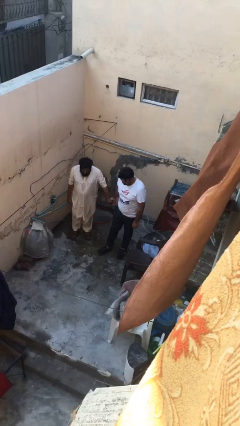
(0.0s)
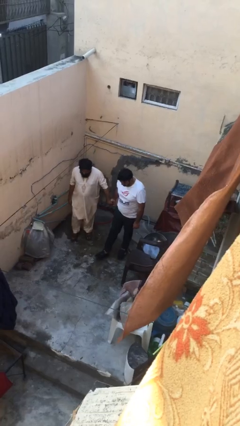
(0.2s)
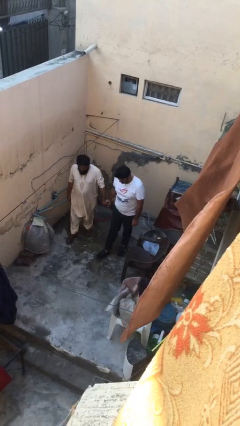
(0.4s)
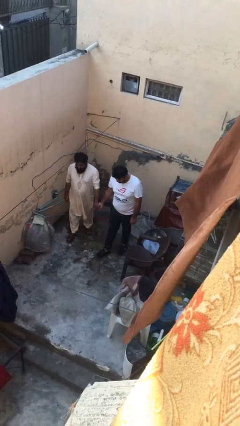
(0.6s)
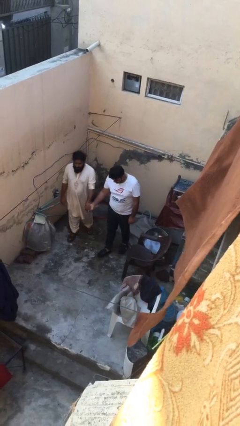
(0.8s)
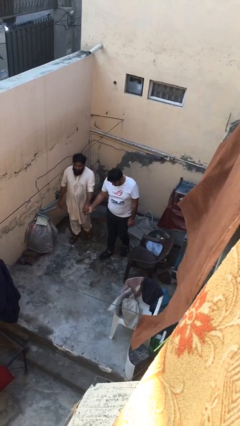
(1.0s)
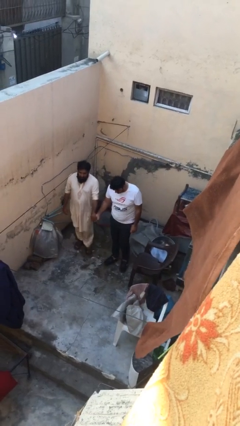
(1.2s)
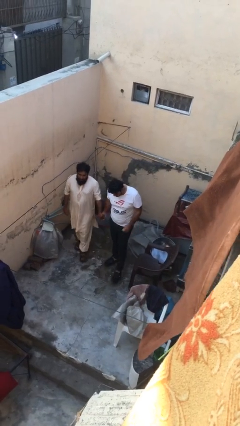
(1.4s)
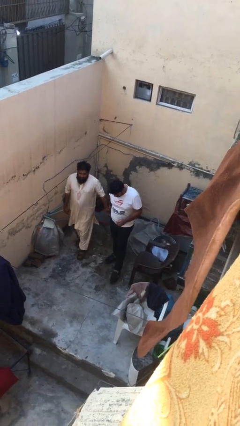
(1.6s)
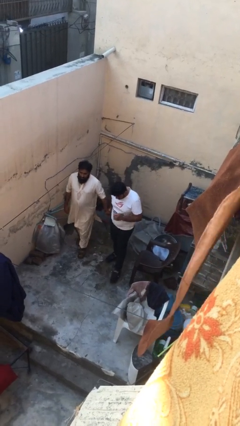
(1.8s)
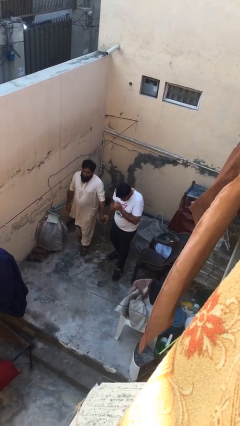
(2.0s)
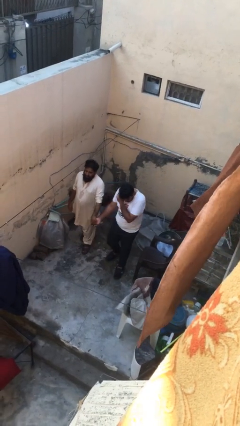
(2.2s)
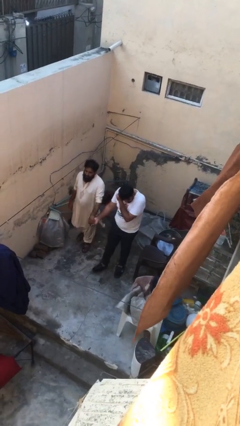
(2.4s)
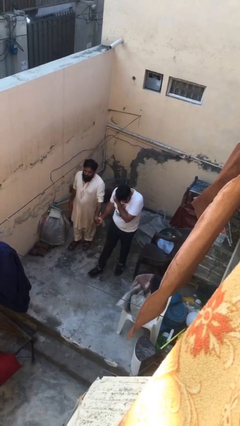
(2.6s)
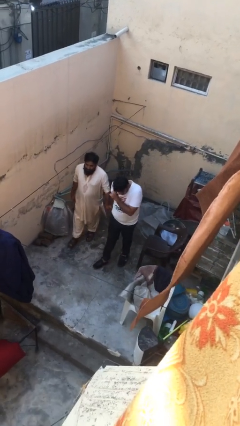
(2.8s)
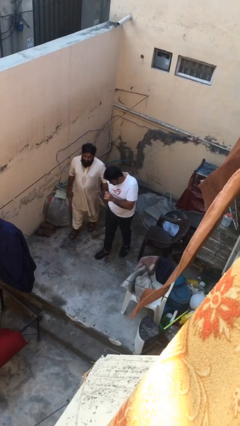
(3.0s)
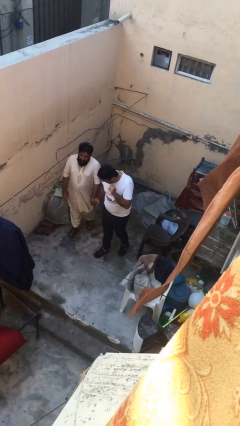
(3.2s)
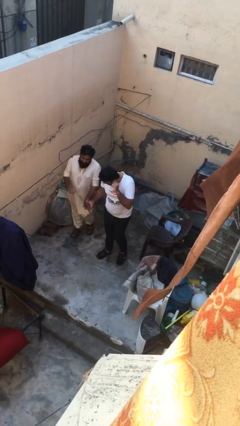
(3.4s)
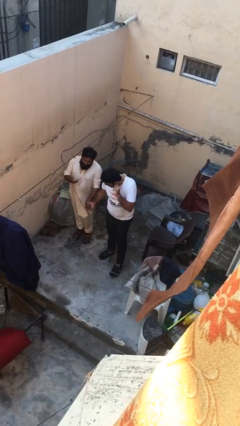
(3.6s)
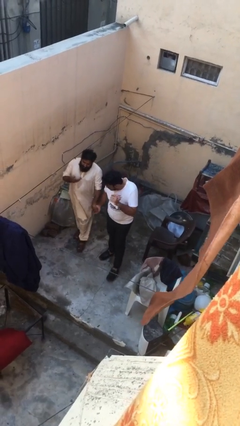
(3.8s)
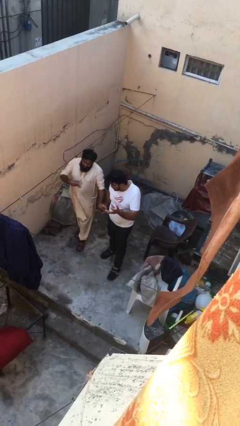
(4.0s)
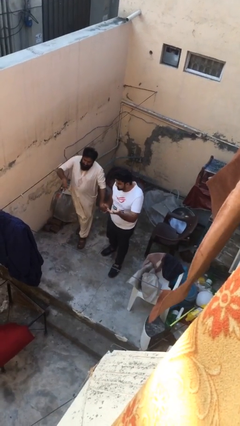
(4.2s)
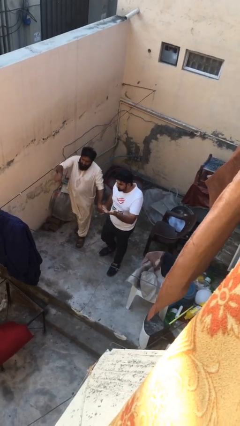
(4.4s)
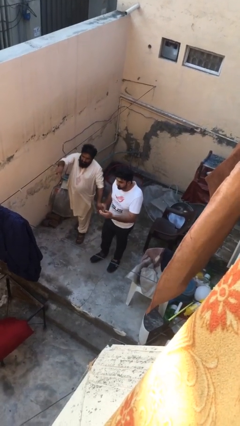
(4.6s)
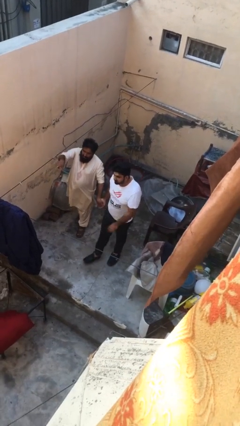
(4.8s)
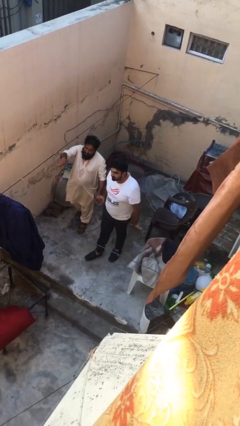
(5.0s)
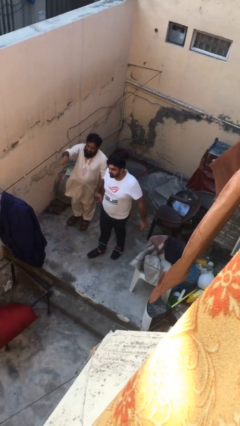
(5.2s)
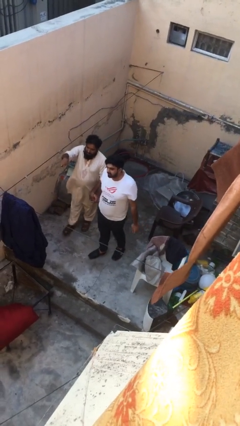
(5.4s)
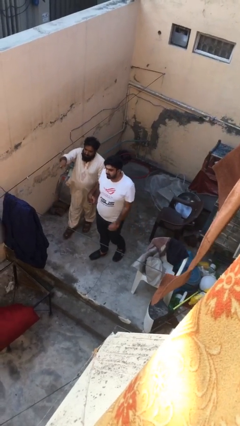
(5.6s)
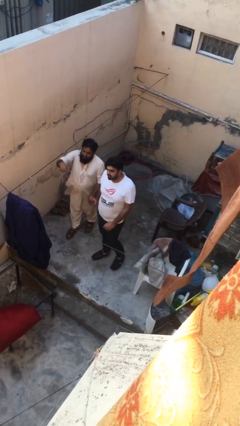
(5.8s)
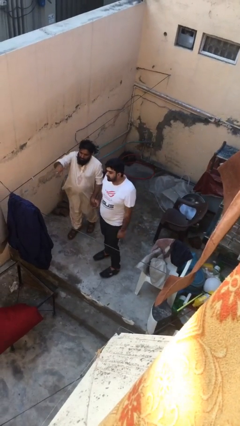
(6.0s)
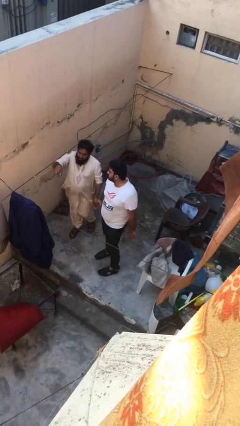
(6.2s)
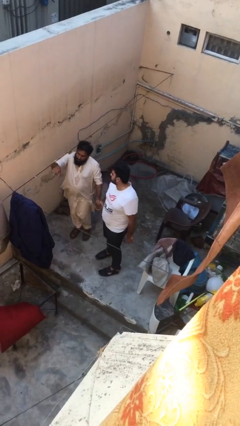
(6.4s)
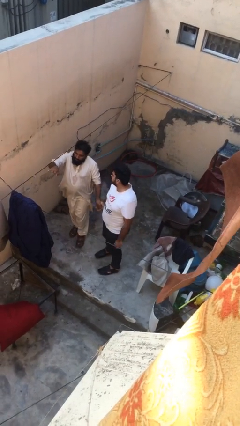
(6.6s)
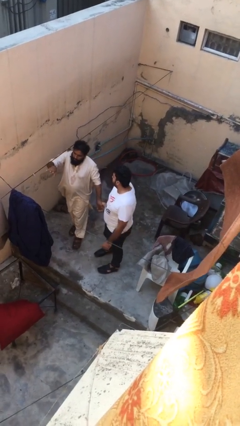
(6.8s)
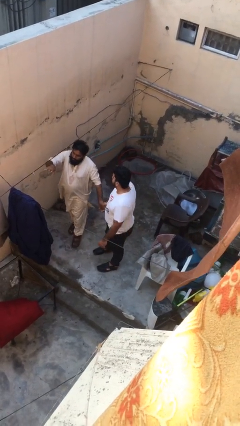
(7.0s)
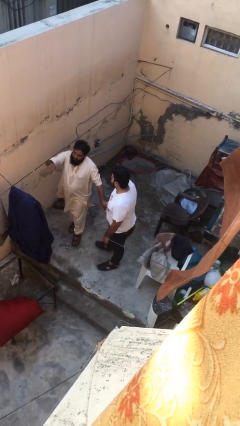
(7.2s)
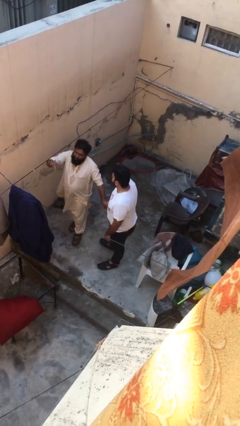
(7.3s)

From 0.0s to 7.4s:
person holds hand

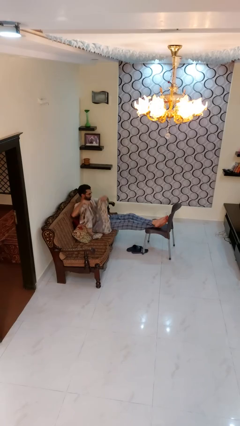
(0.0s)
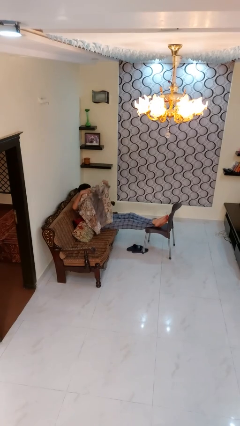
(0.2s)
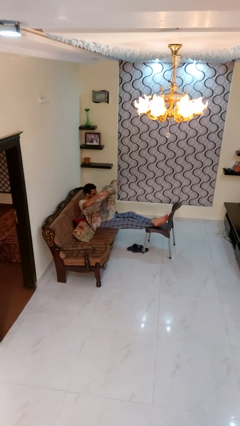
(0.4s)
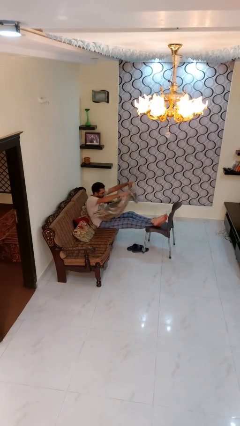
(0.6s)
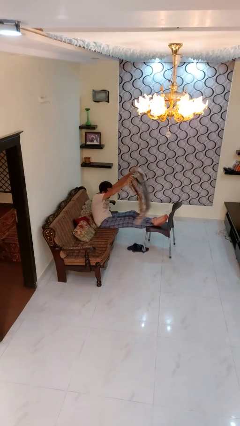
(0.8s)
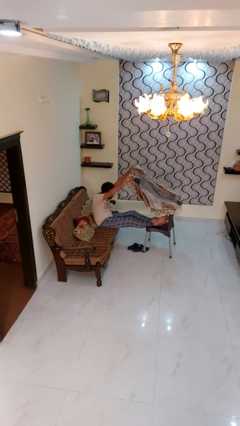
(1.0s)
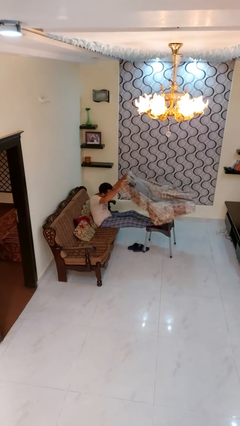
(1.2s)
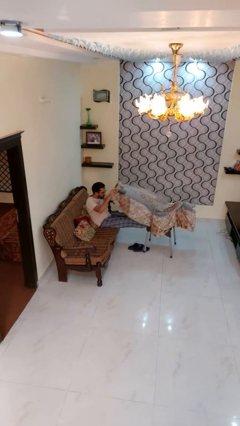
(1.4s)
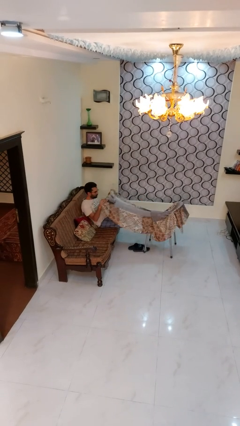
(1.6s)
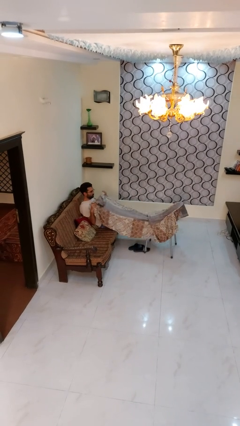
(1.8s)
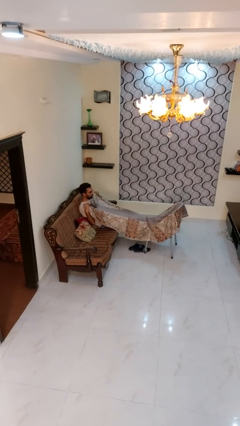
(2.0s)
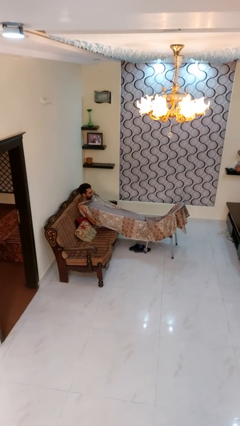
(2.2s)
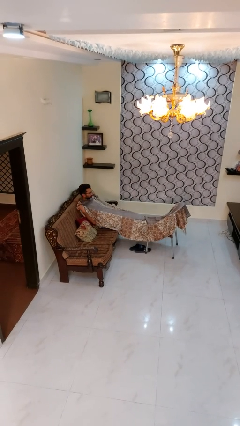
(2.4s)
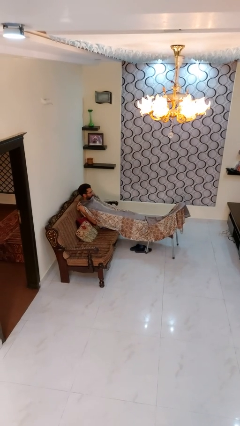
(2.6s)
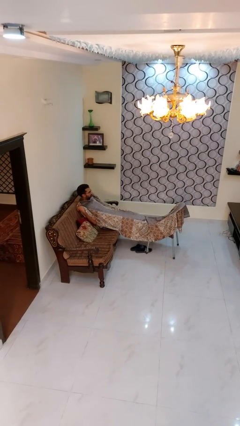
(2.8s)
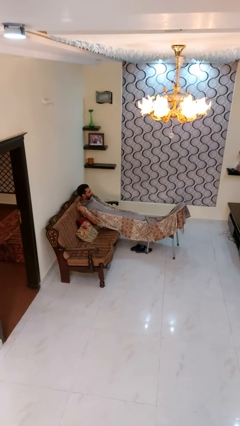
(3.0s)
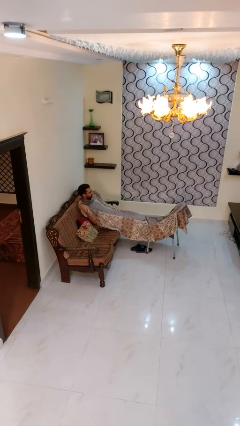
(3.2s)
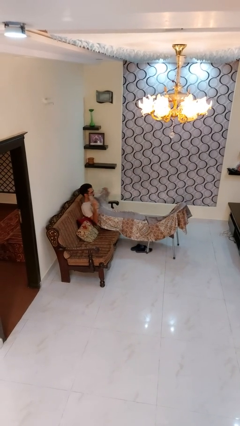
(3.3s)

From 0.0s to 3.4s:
person covers with blanket

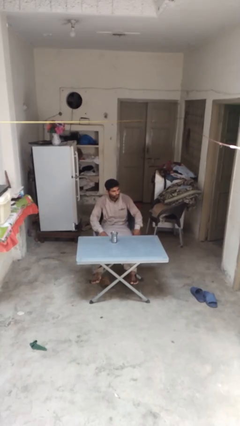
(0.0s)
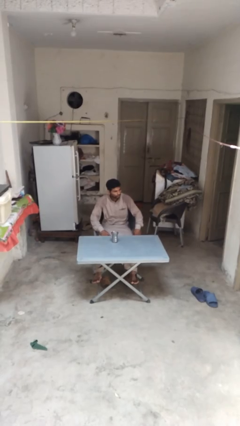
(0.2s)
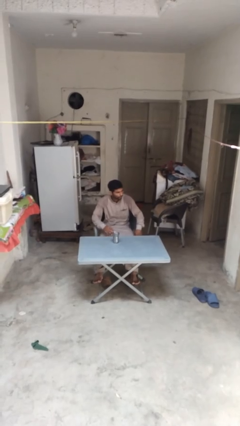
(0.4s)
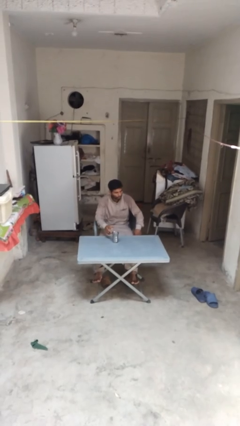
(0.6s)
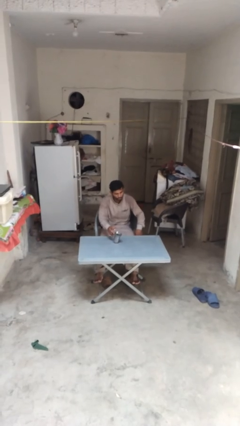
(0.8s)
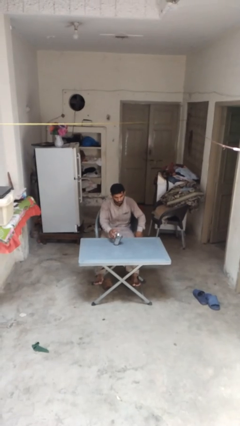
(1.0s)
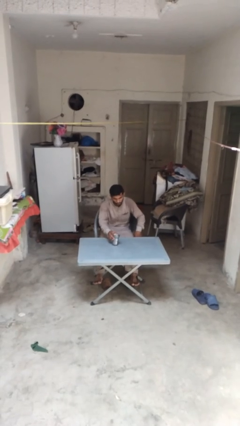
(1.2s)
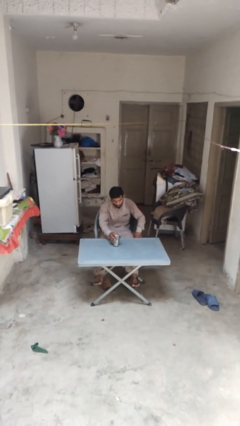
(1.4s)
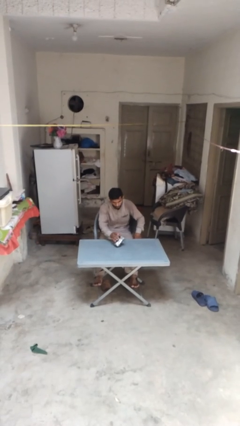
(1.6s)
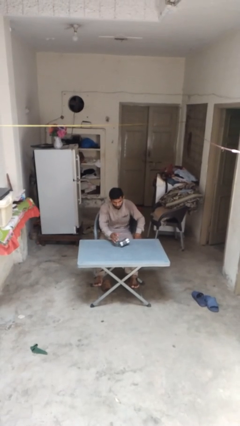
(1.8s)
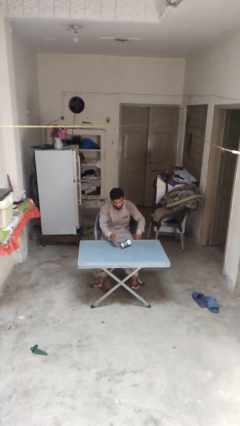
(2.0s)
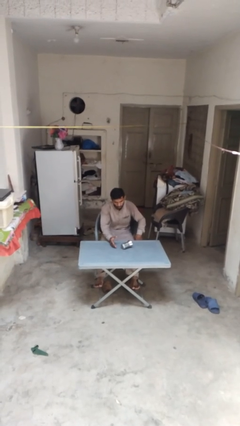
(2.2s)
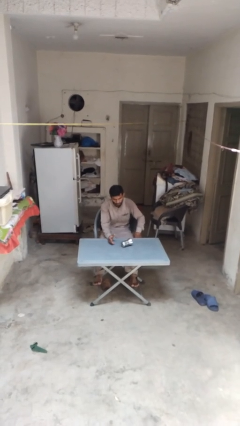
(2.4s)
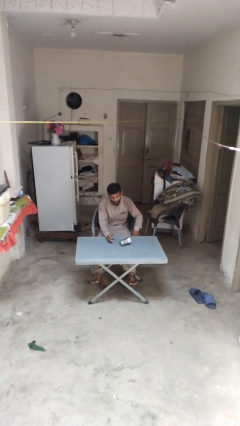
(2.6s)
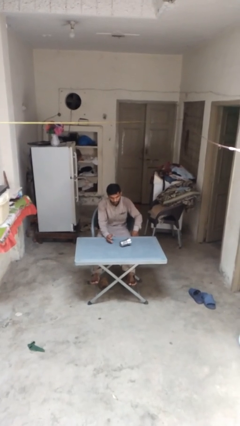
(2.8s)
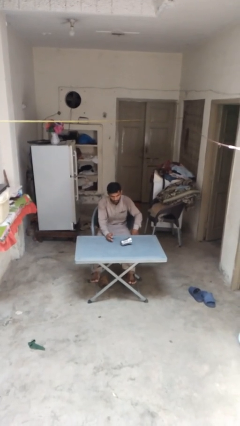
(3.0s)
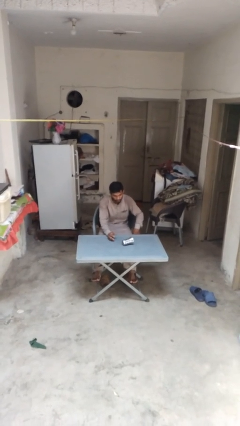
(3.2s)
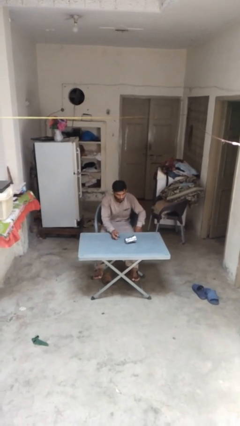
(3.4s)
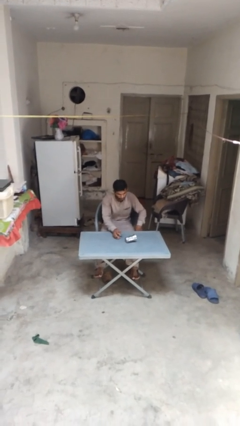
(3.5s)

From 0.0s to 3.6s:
person knocks over glass

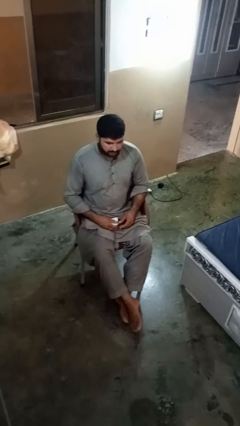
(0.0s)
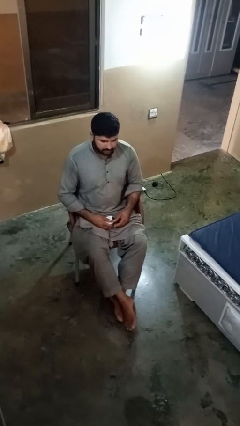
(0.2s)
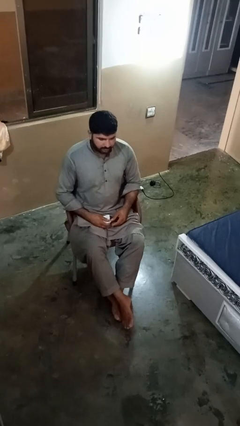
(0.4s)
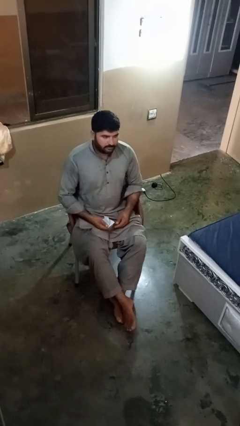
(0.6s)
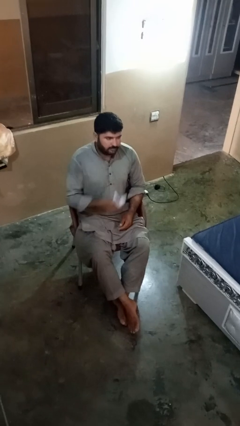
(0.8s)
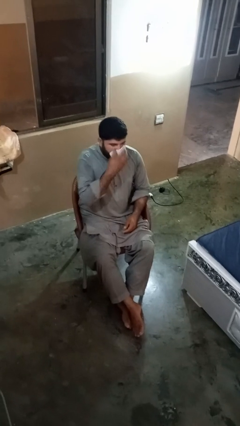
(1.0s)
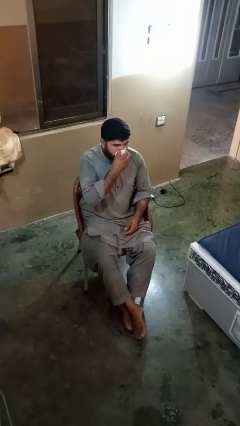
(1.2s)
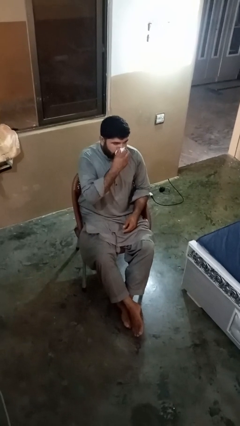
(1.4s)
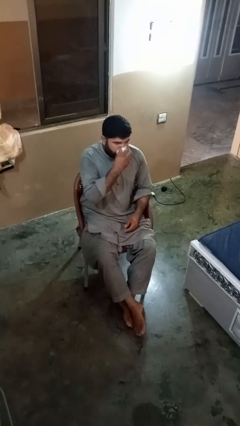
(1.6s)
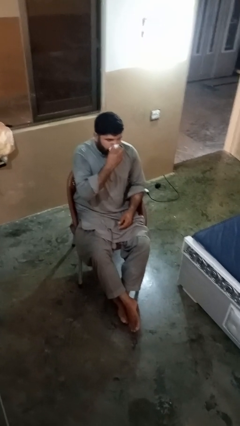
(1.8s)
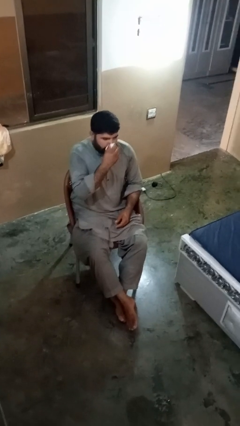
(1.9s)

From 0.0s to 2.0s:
person blows nose

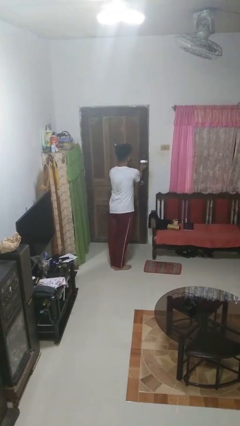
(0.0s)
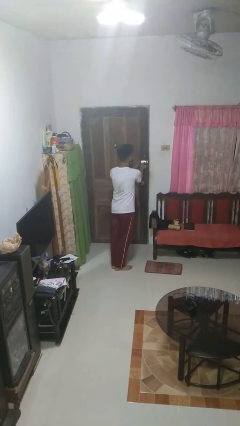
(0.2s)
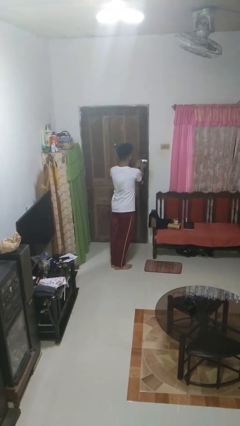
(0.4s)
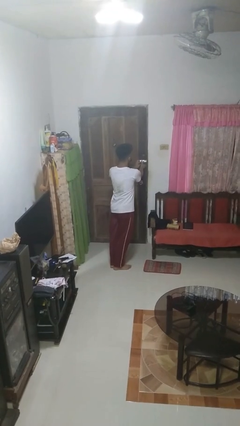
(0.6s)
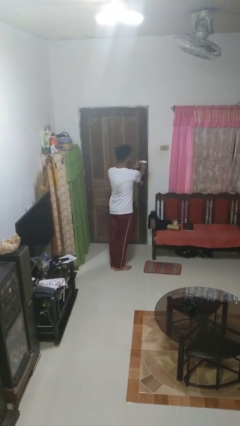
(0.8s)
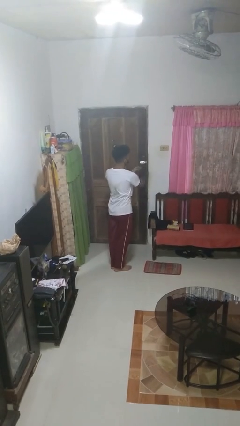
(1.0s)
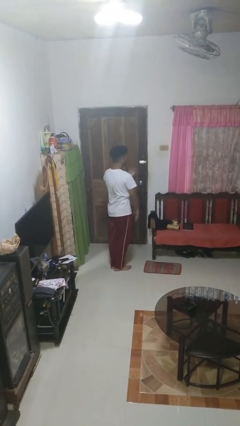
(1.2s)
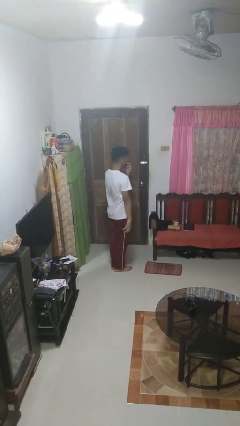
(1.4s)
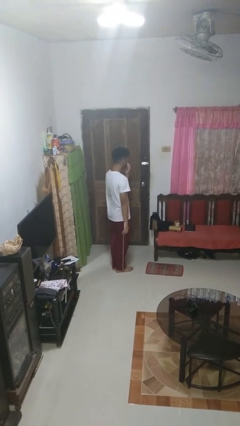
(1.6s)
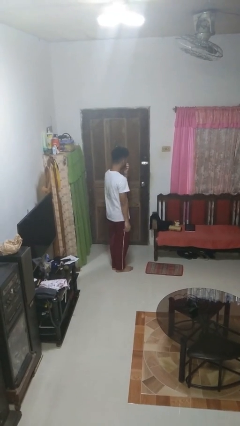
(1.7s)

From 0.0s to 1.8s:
person locks door with keys
